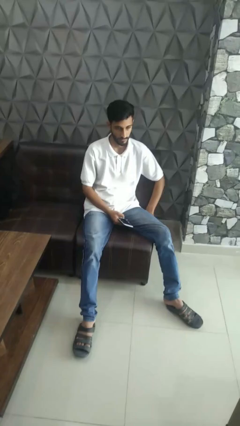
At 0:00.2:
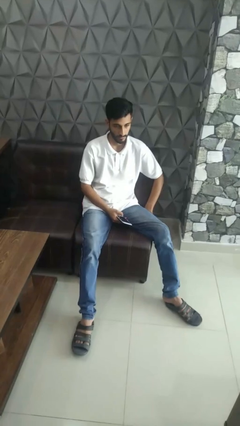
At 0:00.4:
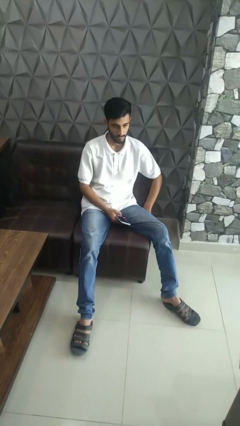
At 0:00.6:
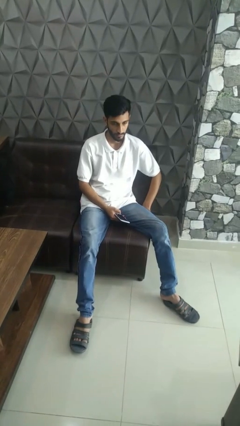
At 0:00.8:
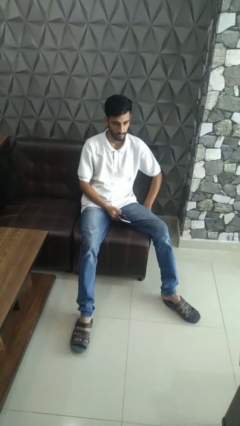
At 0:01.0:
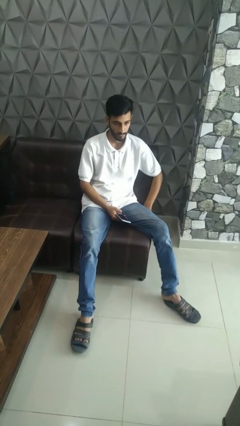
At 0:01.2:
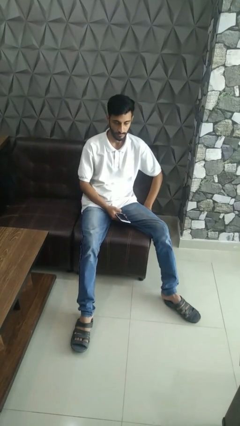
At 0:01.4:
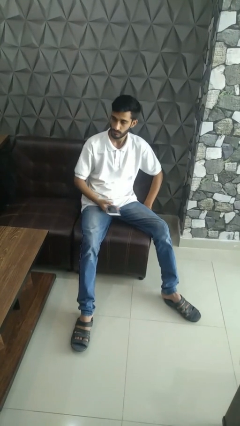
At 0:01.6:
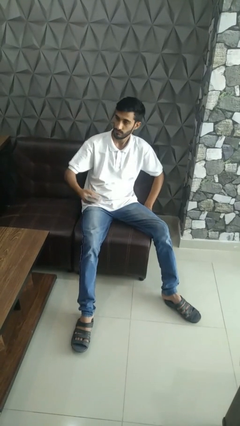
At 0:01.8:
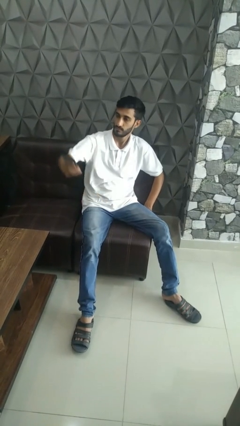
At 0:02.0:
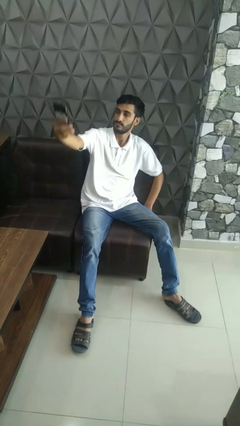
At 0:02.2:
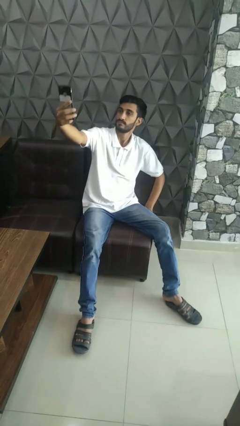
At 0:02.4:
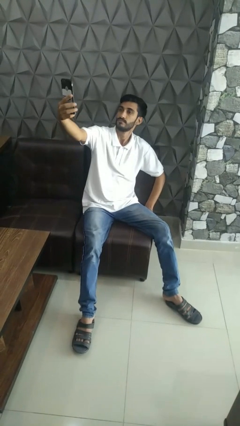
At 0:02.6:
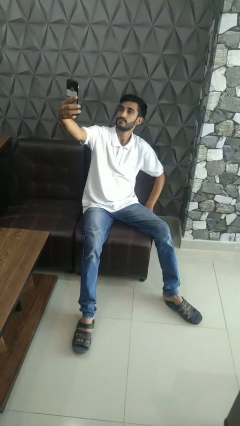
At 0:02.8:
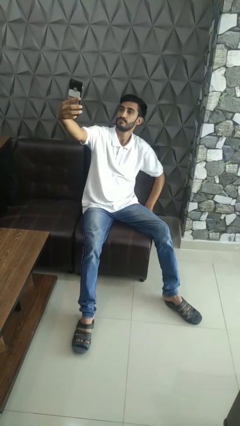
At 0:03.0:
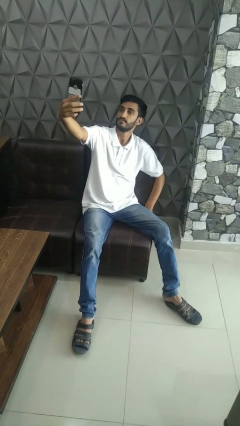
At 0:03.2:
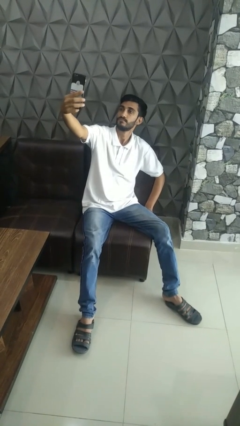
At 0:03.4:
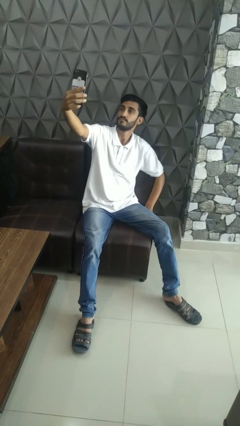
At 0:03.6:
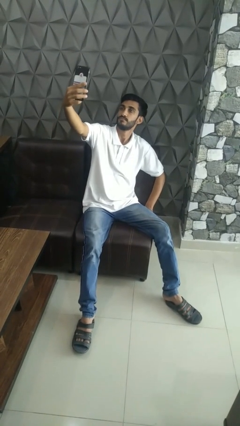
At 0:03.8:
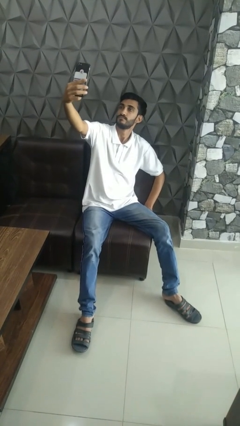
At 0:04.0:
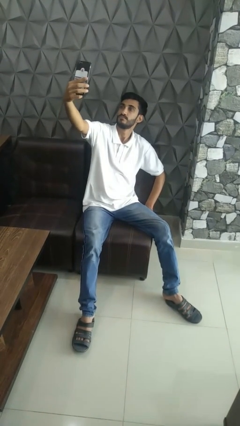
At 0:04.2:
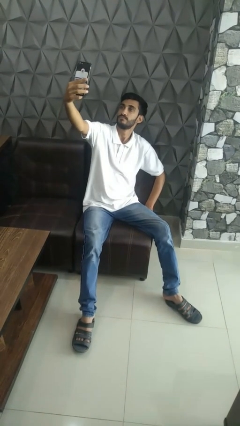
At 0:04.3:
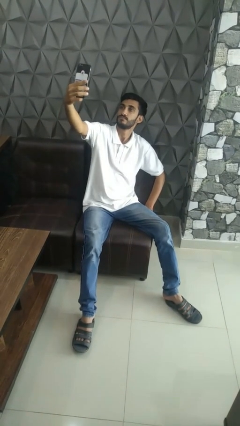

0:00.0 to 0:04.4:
person takes selfie

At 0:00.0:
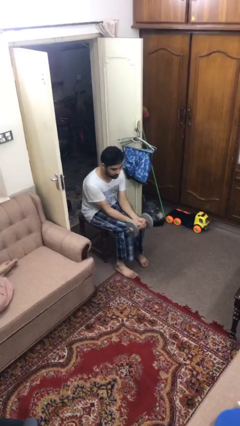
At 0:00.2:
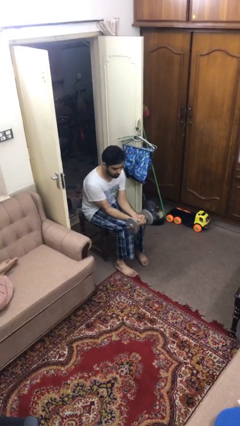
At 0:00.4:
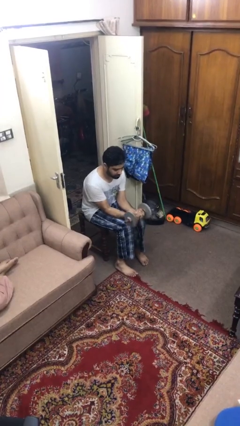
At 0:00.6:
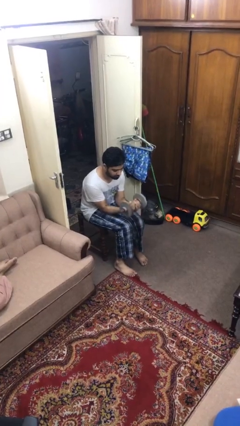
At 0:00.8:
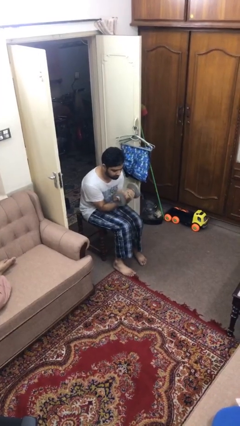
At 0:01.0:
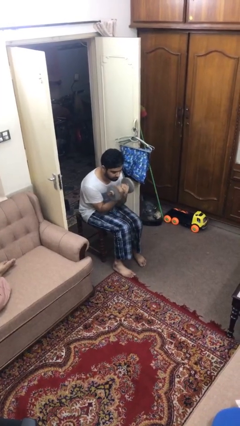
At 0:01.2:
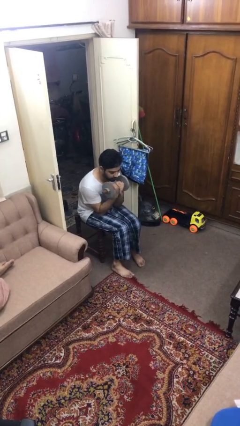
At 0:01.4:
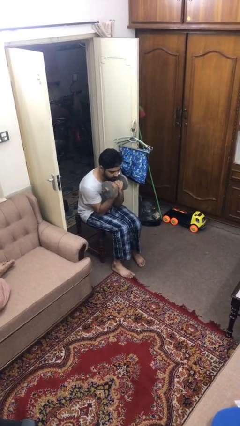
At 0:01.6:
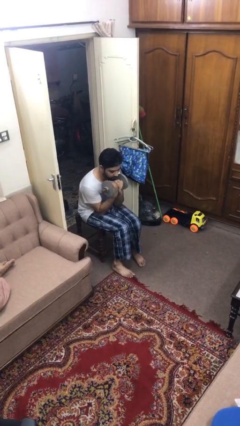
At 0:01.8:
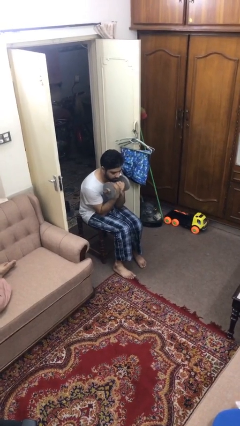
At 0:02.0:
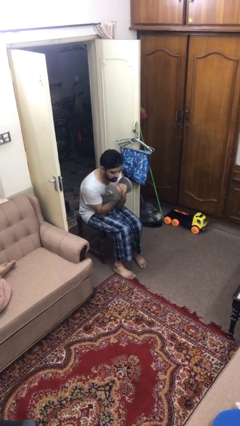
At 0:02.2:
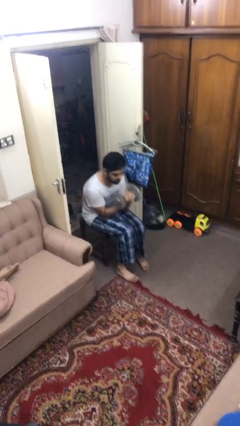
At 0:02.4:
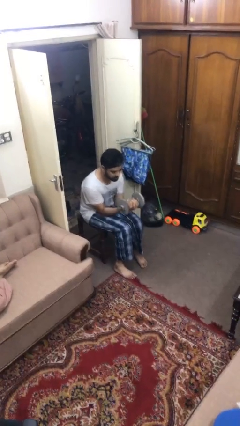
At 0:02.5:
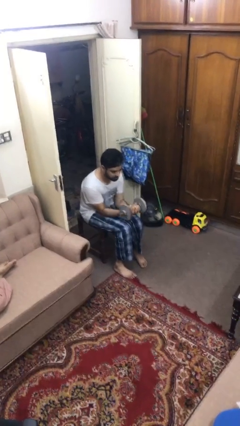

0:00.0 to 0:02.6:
person lifts dumbbells

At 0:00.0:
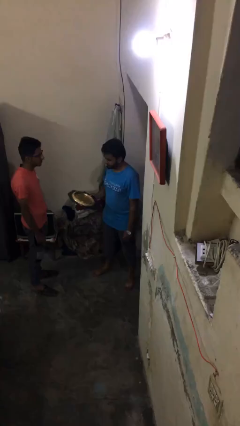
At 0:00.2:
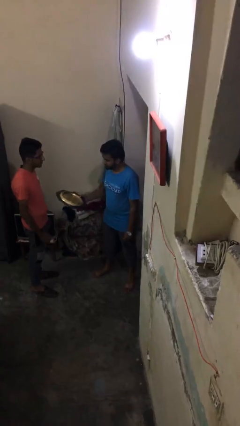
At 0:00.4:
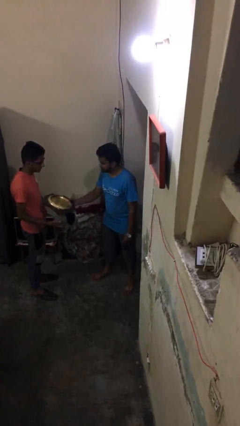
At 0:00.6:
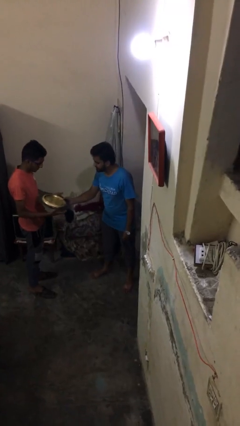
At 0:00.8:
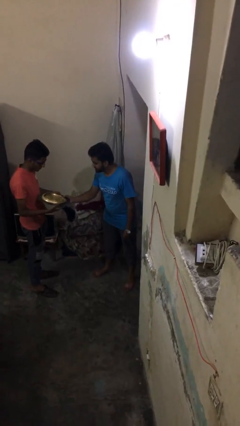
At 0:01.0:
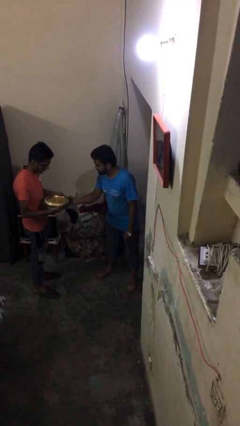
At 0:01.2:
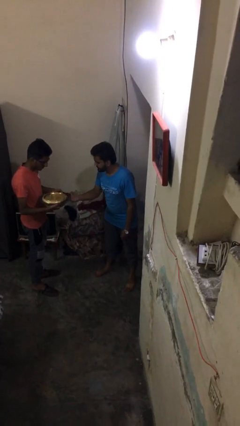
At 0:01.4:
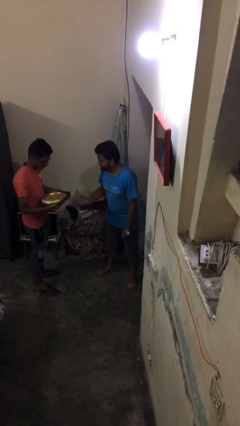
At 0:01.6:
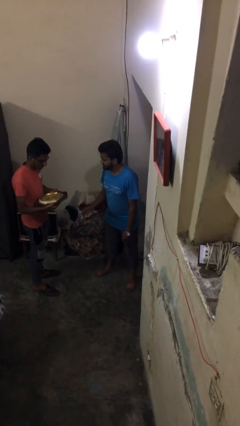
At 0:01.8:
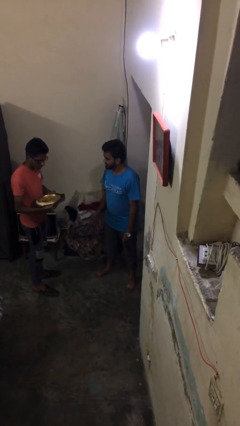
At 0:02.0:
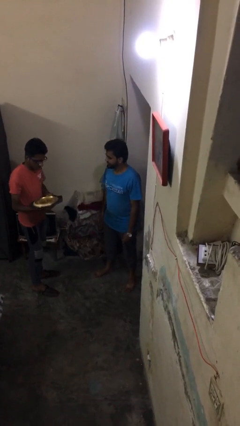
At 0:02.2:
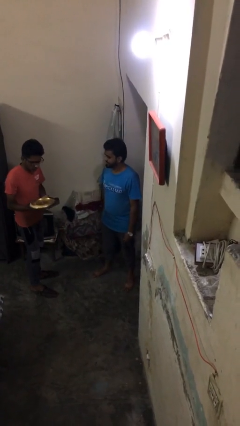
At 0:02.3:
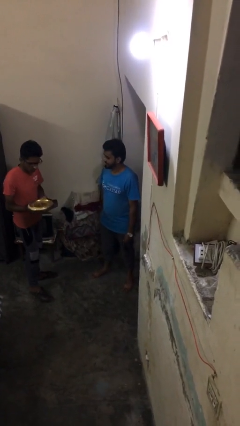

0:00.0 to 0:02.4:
person transfers object to person

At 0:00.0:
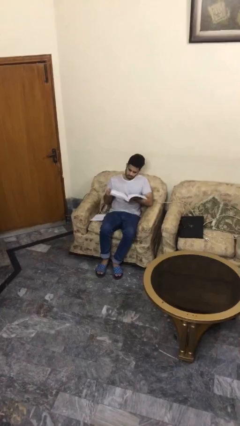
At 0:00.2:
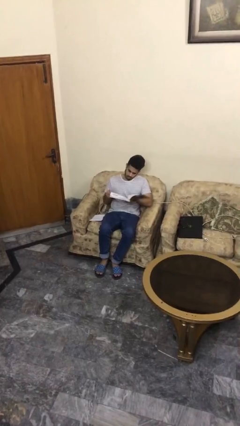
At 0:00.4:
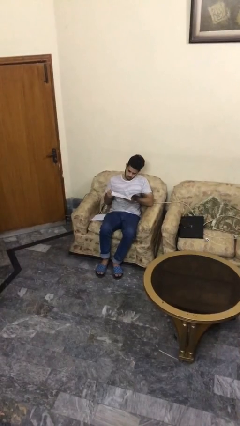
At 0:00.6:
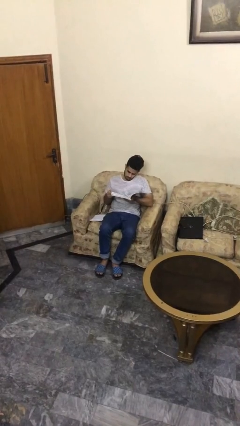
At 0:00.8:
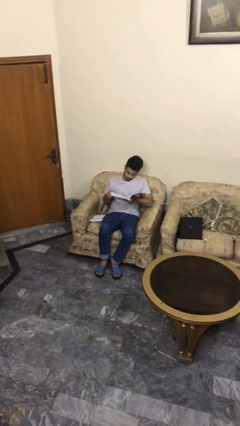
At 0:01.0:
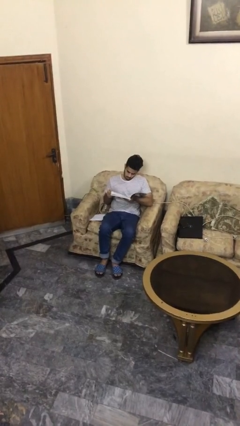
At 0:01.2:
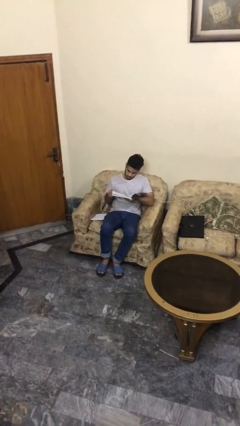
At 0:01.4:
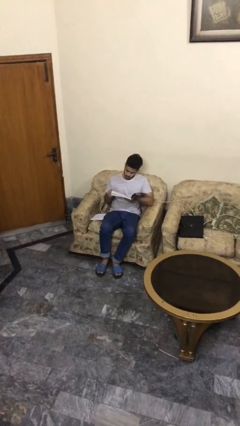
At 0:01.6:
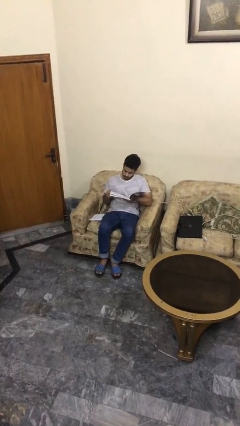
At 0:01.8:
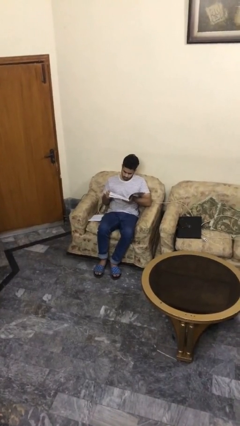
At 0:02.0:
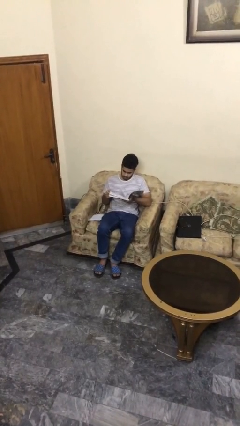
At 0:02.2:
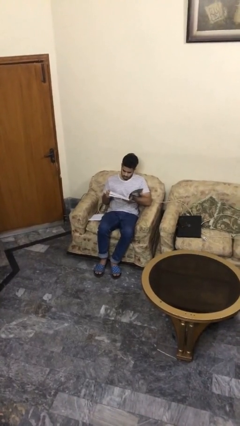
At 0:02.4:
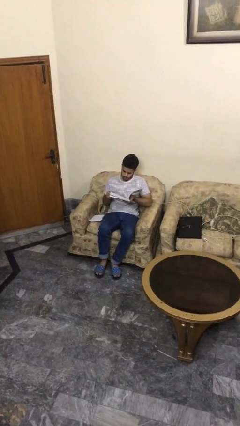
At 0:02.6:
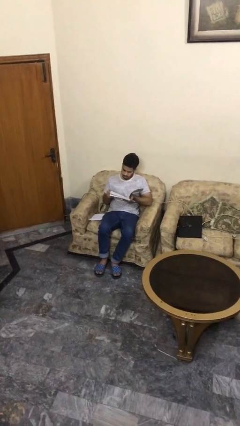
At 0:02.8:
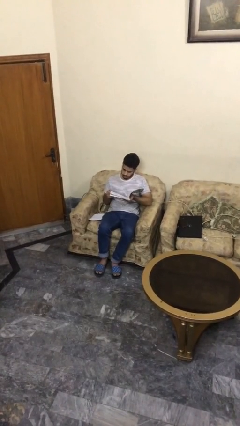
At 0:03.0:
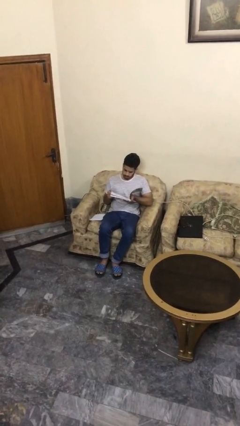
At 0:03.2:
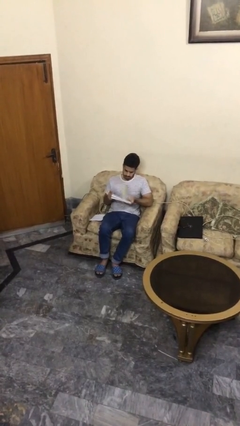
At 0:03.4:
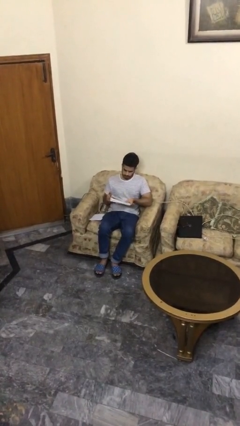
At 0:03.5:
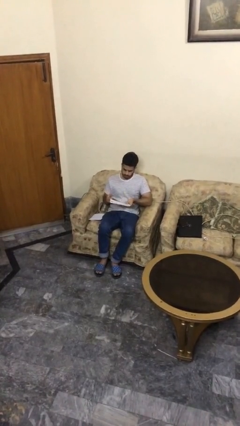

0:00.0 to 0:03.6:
person reads document

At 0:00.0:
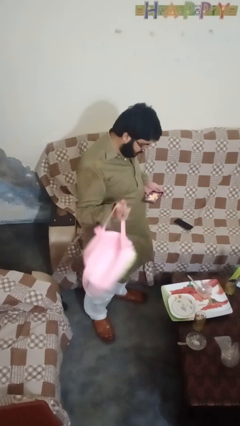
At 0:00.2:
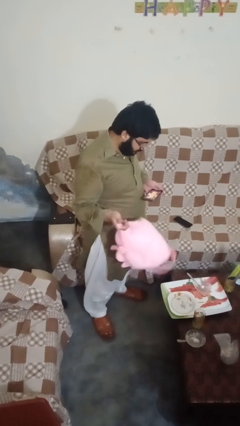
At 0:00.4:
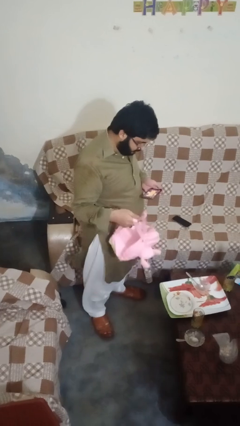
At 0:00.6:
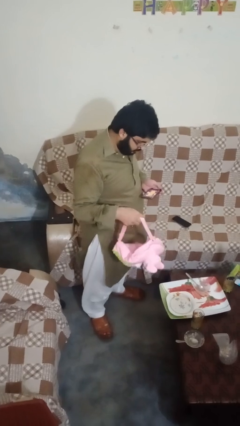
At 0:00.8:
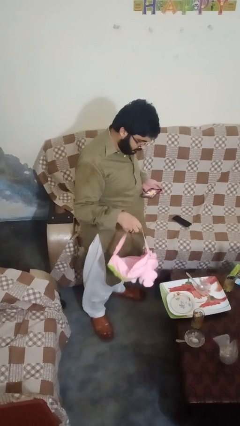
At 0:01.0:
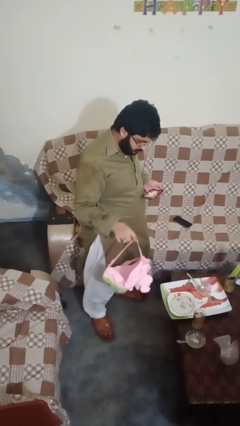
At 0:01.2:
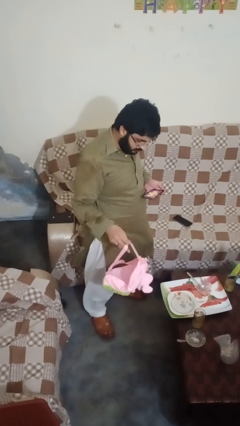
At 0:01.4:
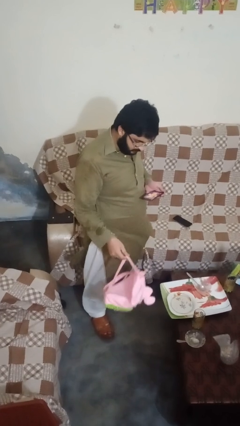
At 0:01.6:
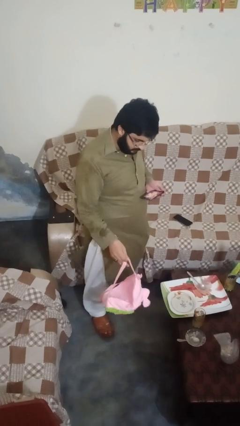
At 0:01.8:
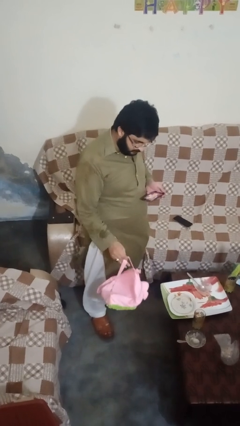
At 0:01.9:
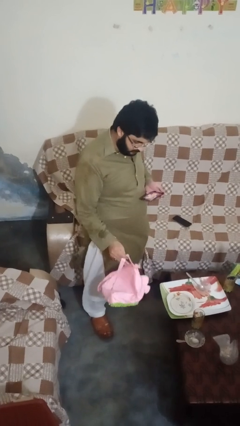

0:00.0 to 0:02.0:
person takes off backpack

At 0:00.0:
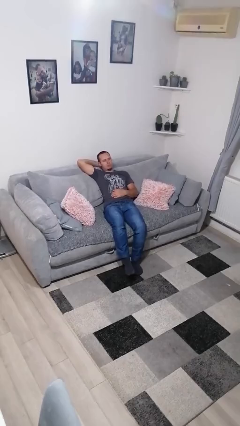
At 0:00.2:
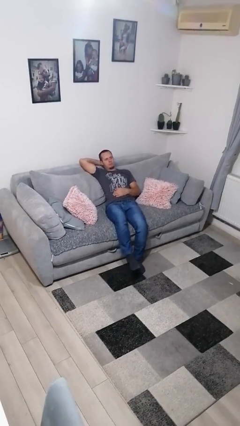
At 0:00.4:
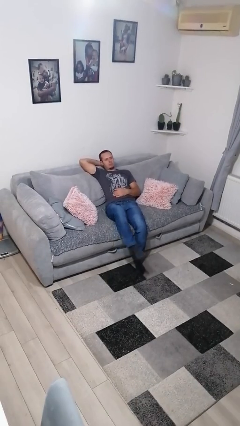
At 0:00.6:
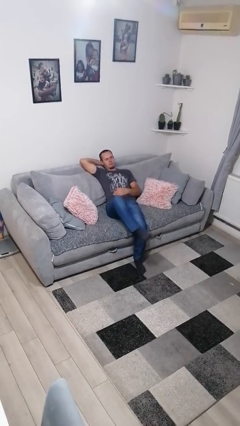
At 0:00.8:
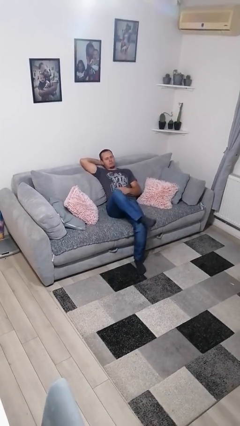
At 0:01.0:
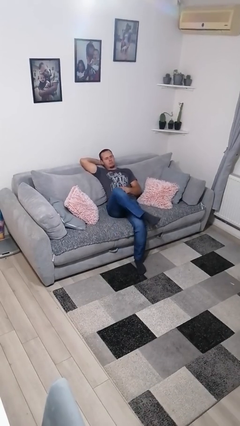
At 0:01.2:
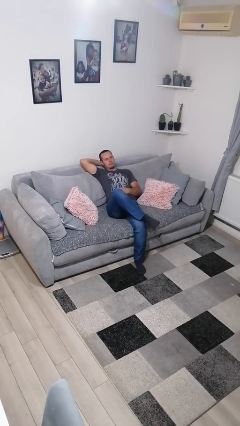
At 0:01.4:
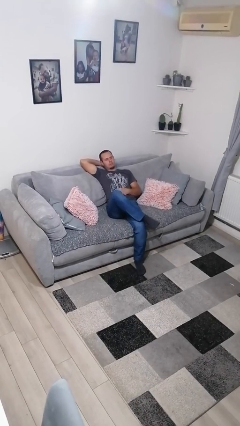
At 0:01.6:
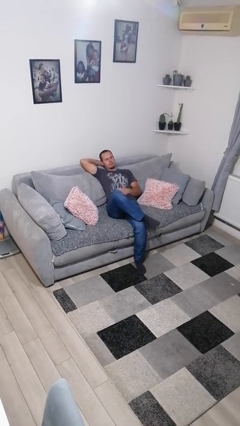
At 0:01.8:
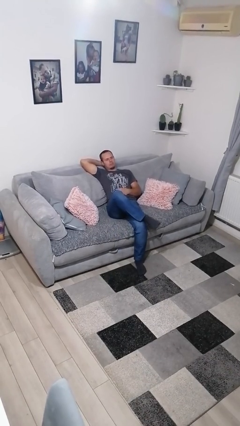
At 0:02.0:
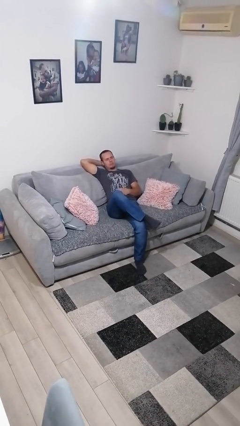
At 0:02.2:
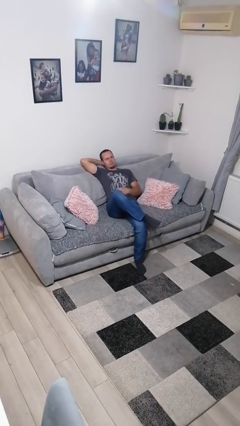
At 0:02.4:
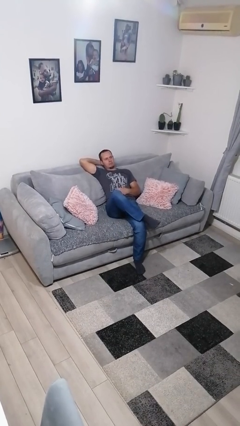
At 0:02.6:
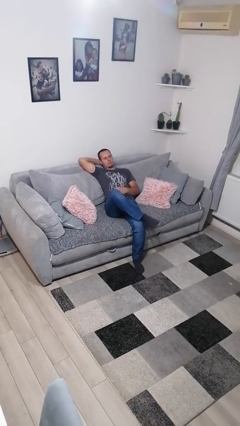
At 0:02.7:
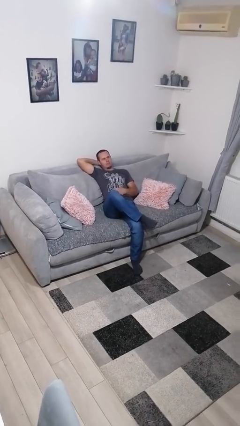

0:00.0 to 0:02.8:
person crosses legs
